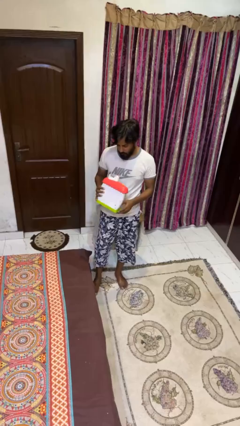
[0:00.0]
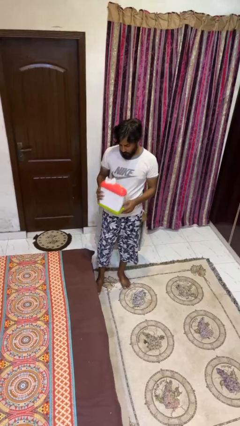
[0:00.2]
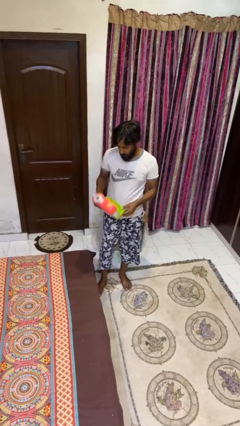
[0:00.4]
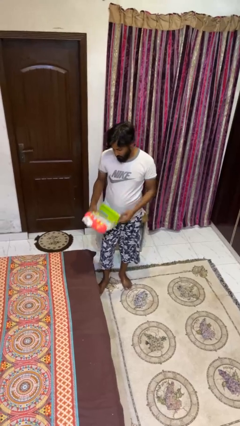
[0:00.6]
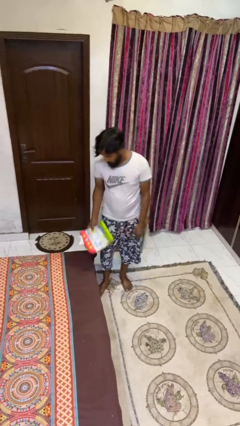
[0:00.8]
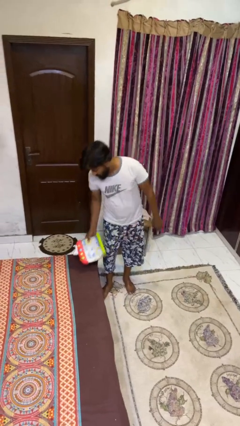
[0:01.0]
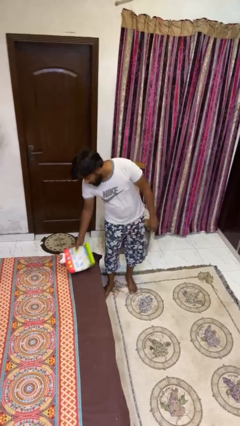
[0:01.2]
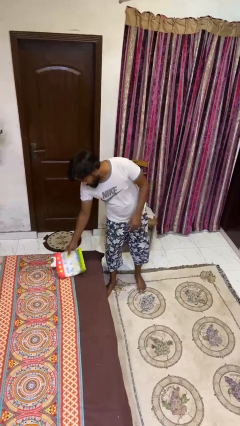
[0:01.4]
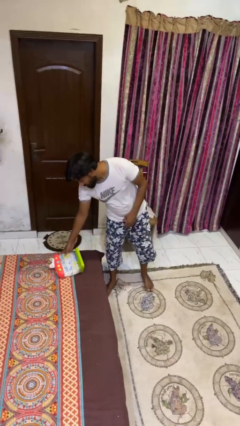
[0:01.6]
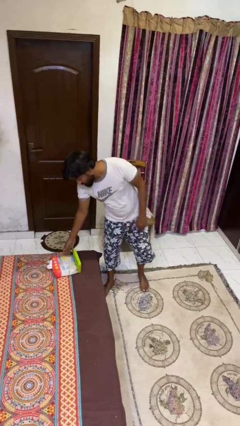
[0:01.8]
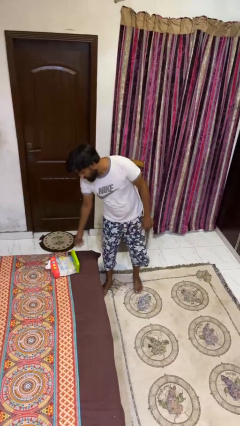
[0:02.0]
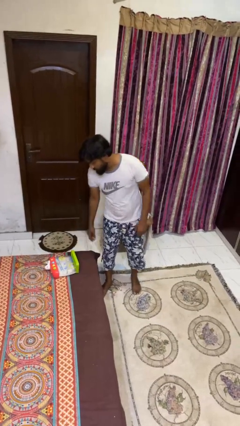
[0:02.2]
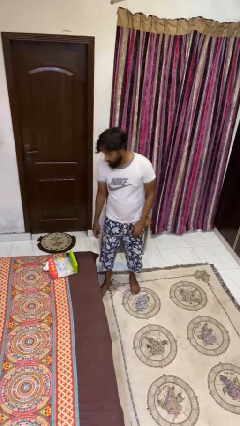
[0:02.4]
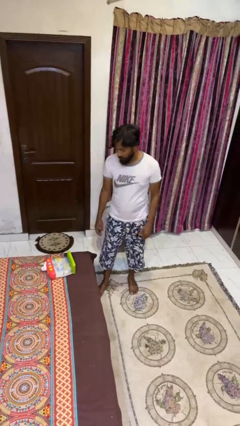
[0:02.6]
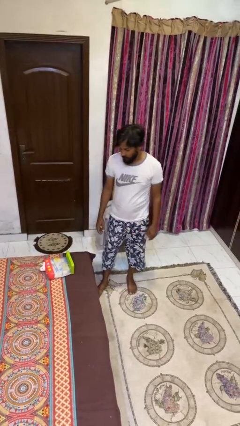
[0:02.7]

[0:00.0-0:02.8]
person puts down object on bed

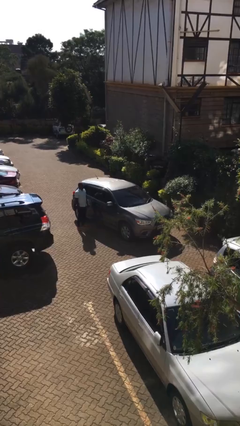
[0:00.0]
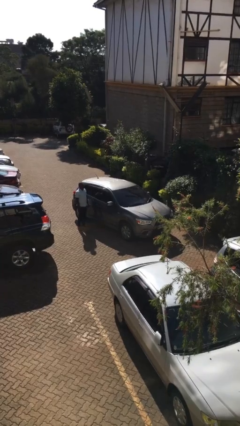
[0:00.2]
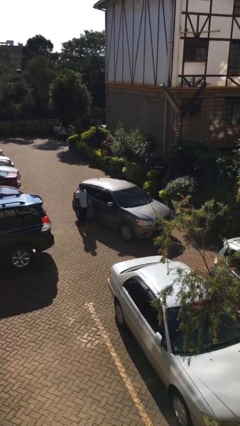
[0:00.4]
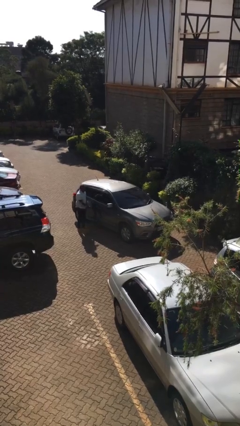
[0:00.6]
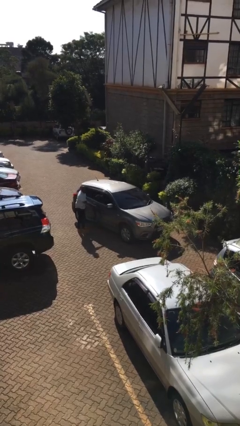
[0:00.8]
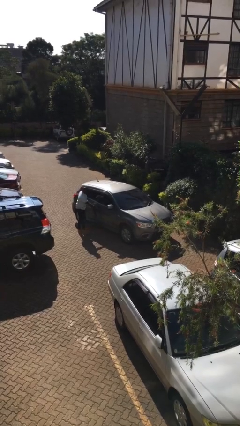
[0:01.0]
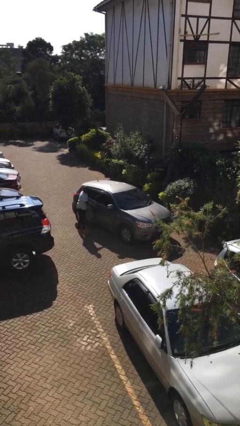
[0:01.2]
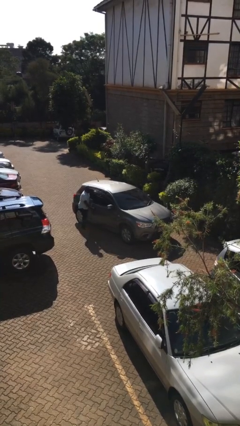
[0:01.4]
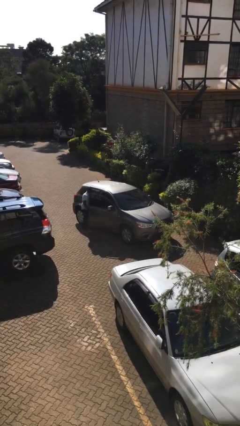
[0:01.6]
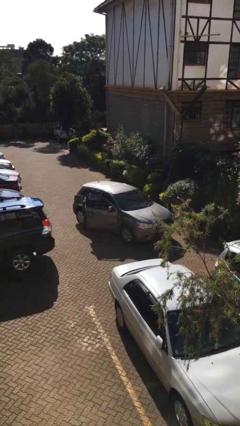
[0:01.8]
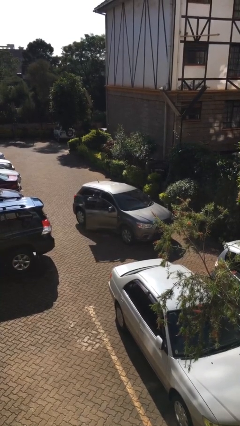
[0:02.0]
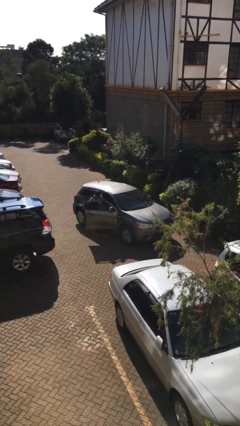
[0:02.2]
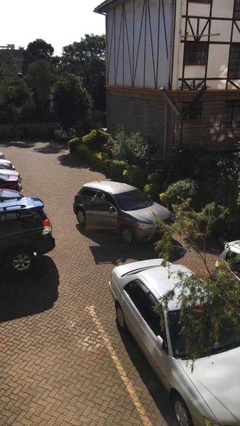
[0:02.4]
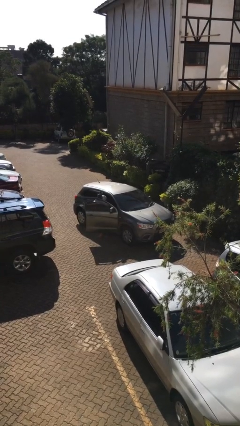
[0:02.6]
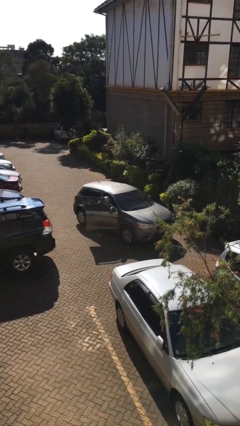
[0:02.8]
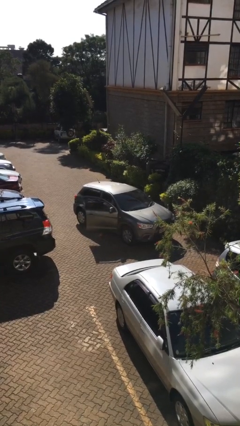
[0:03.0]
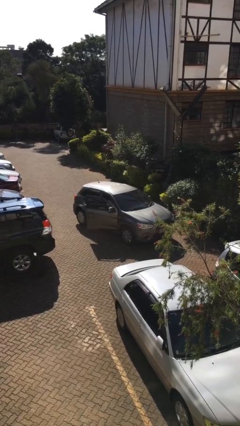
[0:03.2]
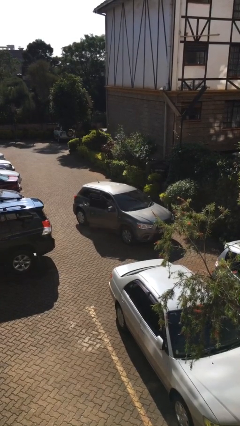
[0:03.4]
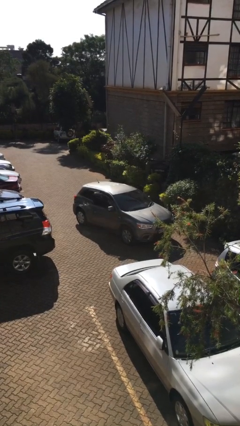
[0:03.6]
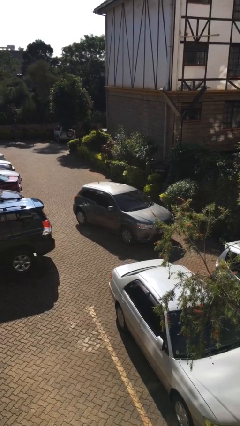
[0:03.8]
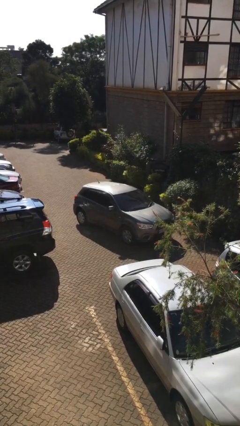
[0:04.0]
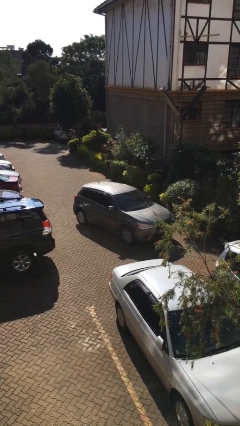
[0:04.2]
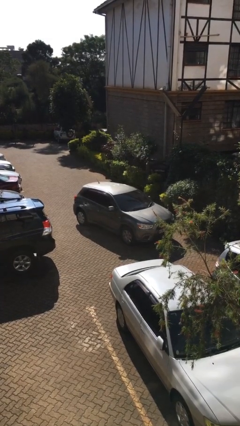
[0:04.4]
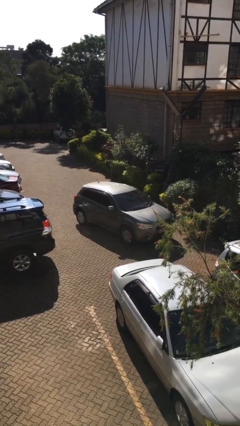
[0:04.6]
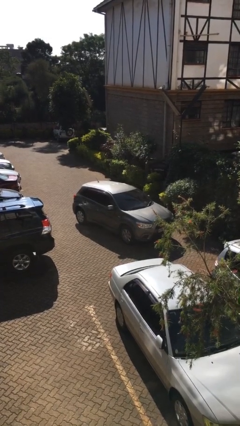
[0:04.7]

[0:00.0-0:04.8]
car picks up person

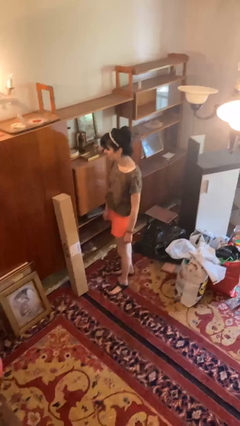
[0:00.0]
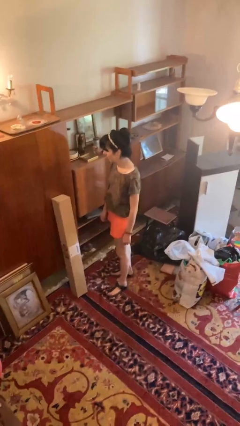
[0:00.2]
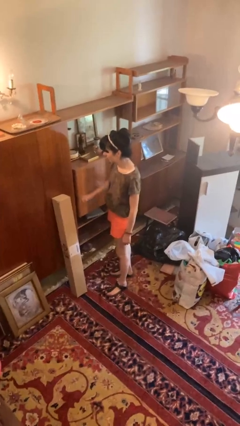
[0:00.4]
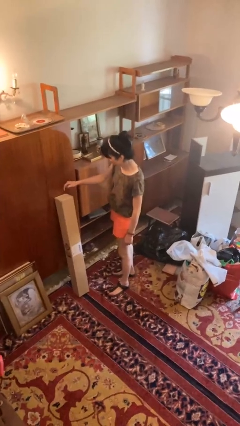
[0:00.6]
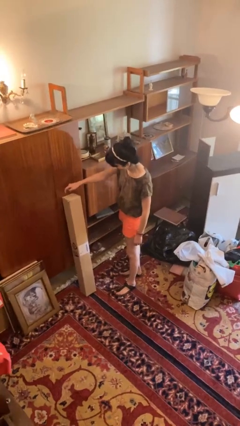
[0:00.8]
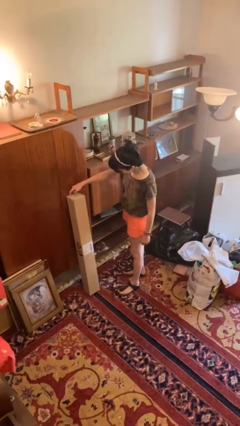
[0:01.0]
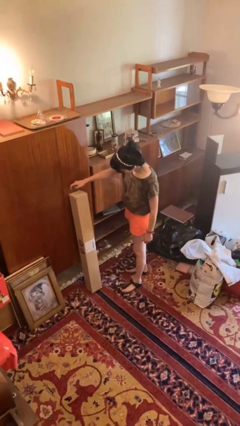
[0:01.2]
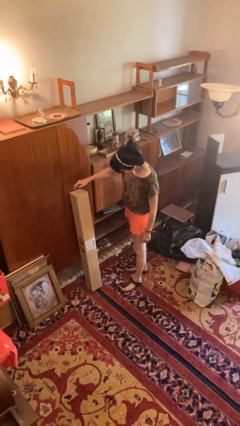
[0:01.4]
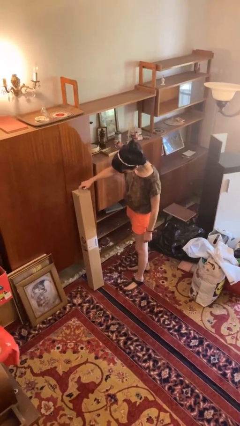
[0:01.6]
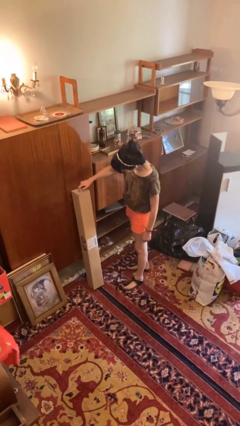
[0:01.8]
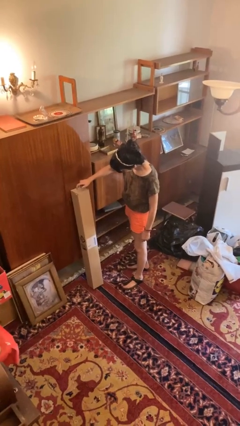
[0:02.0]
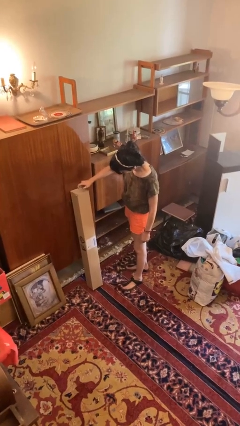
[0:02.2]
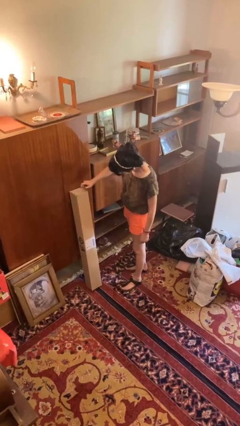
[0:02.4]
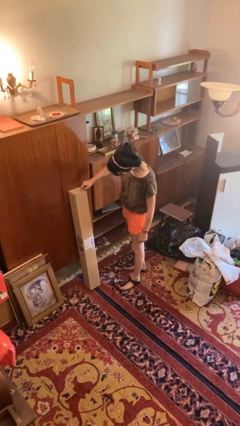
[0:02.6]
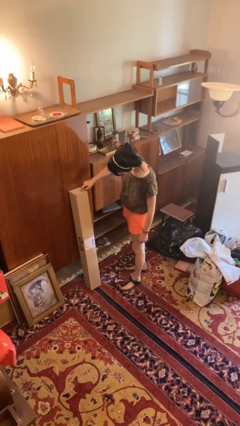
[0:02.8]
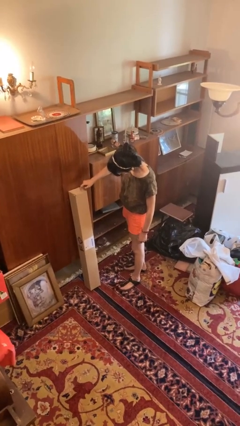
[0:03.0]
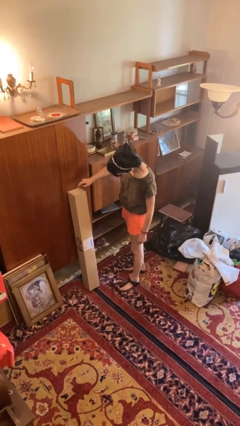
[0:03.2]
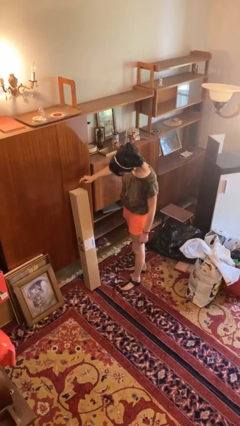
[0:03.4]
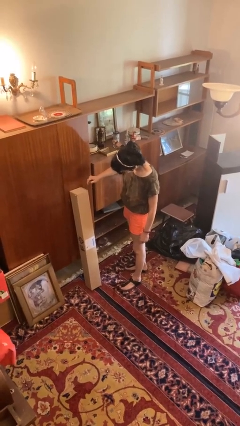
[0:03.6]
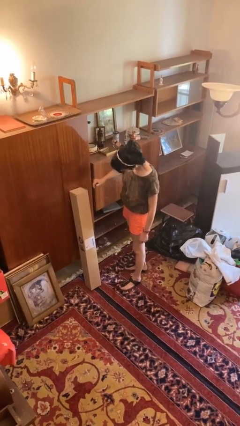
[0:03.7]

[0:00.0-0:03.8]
person taps object with finger

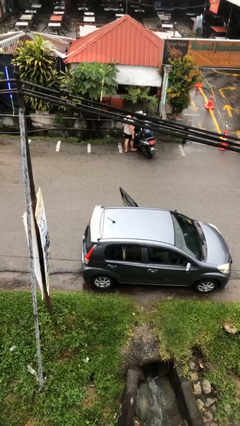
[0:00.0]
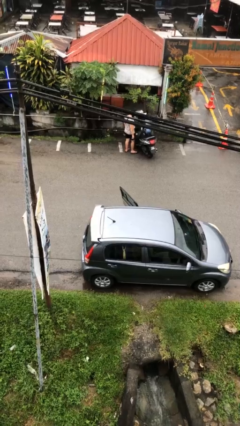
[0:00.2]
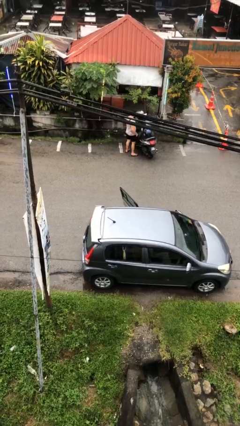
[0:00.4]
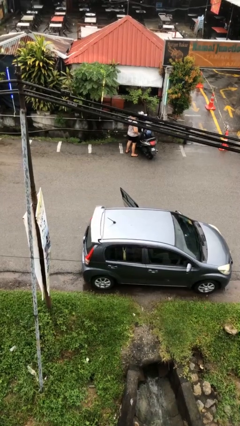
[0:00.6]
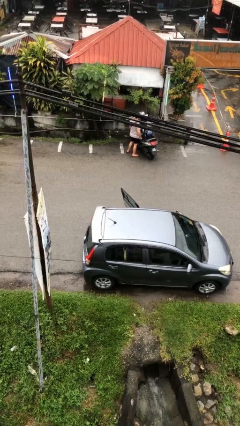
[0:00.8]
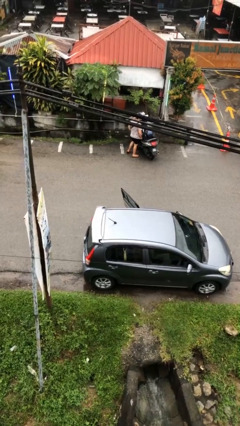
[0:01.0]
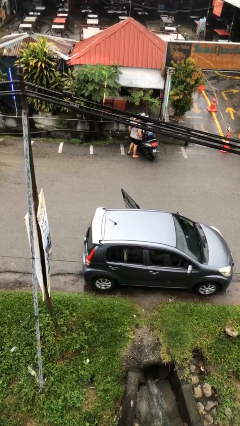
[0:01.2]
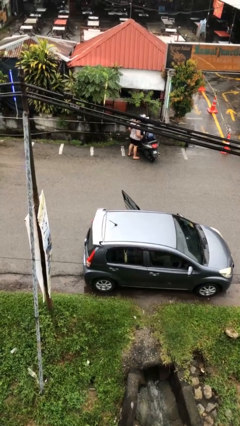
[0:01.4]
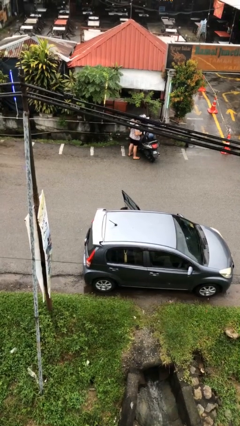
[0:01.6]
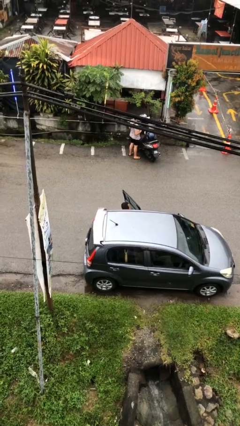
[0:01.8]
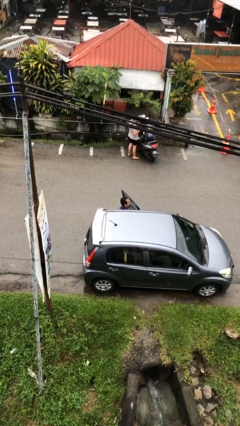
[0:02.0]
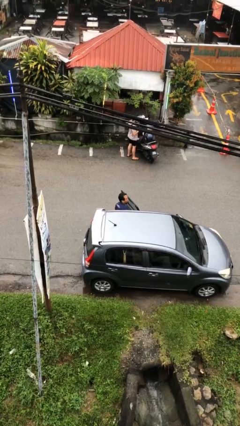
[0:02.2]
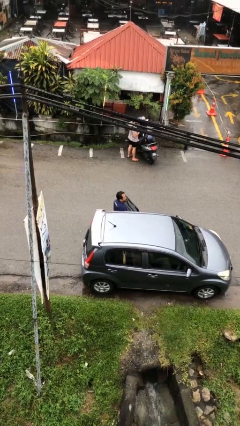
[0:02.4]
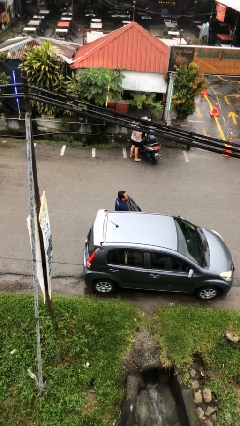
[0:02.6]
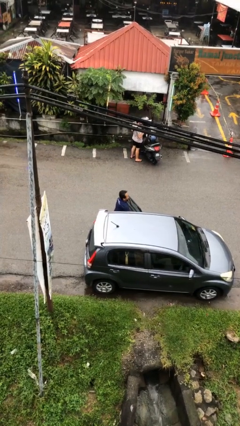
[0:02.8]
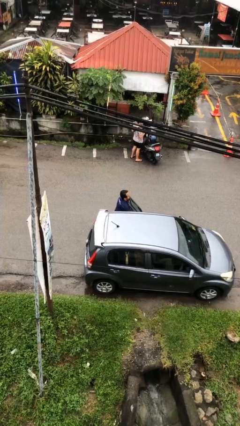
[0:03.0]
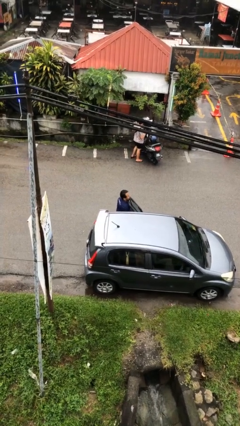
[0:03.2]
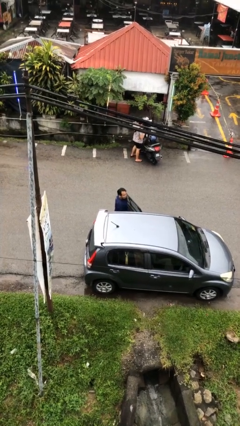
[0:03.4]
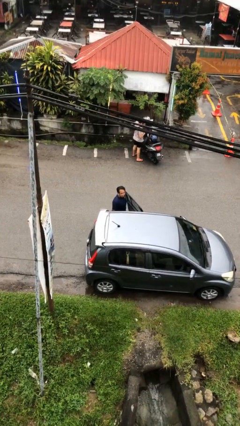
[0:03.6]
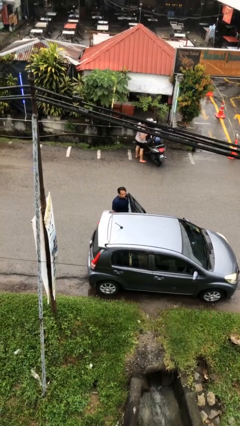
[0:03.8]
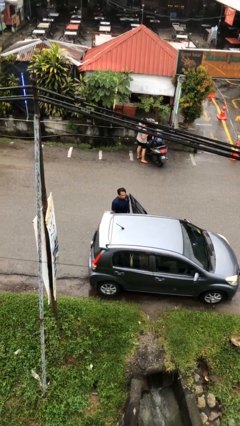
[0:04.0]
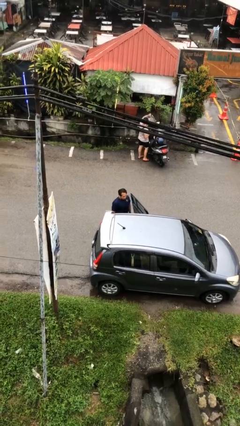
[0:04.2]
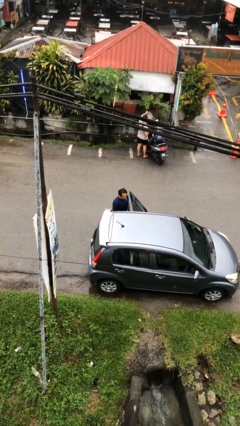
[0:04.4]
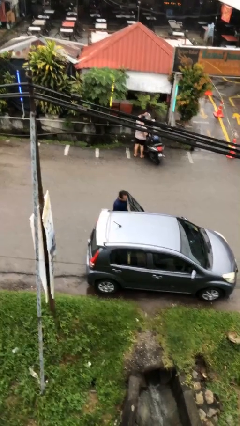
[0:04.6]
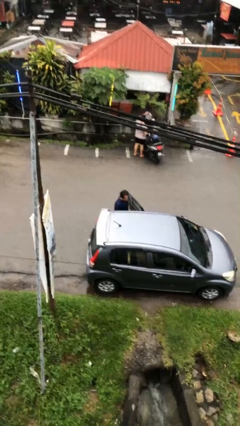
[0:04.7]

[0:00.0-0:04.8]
person exits car

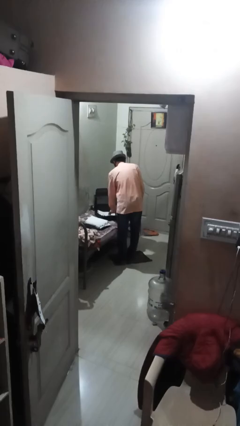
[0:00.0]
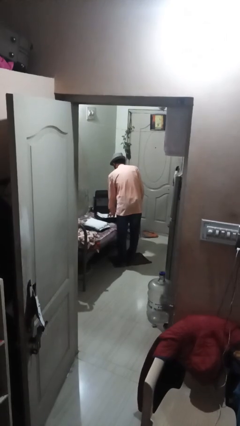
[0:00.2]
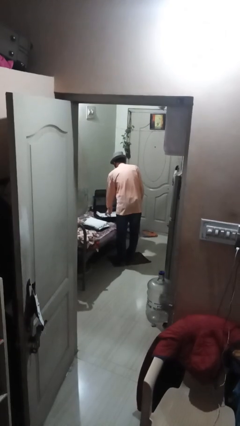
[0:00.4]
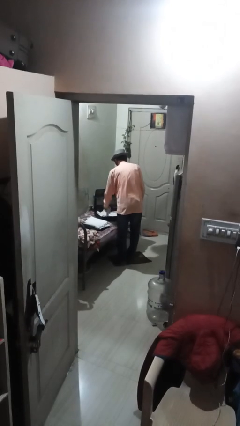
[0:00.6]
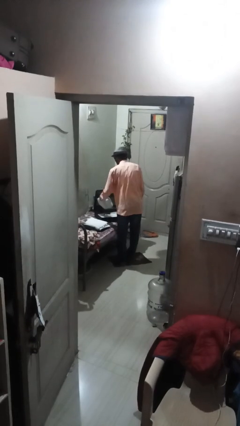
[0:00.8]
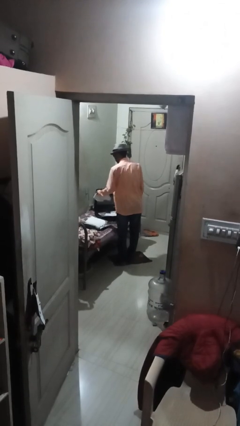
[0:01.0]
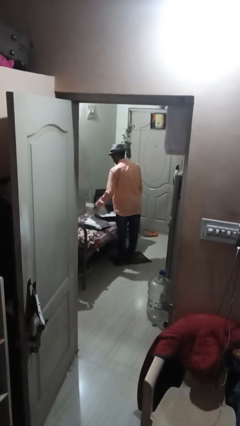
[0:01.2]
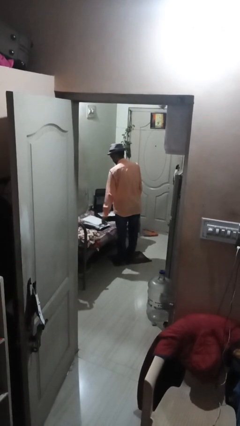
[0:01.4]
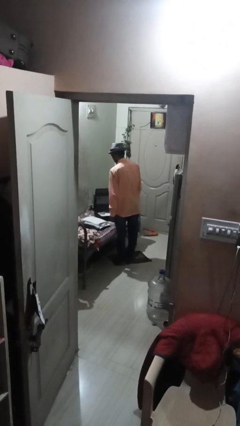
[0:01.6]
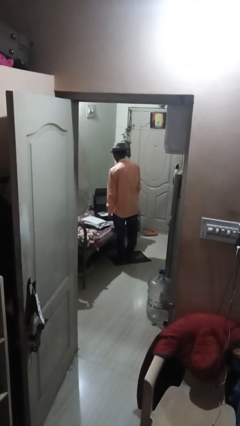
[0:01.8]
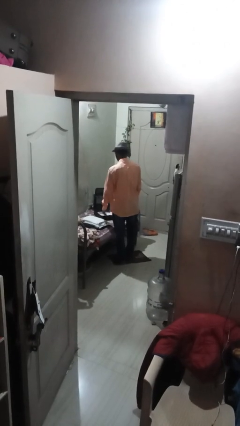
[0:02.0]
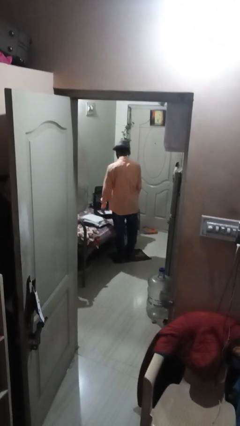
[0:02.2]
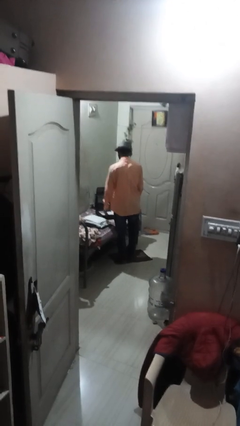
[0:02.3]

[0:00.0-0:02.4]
person unloads clothes from suitcase
